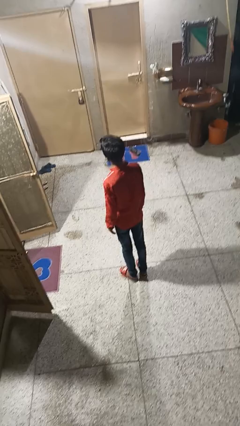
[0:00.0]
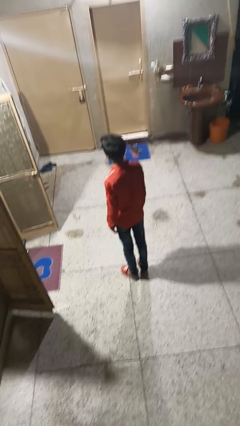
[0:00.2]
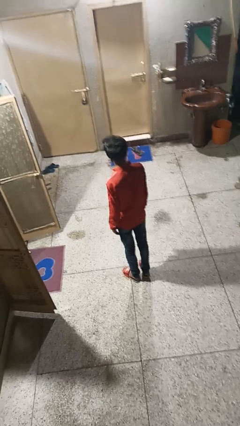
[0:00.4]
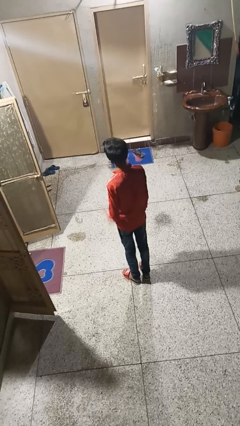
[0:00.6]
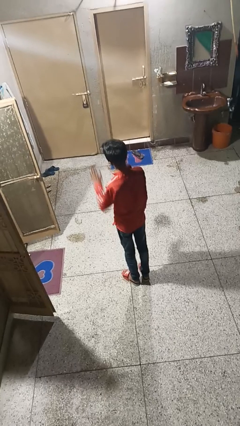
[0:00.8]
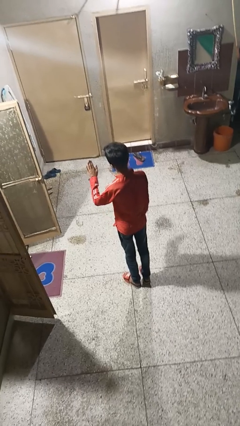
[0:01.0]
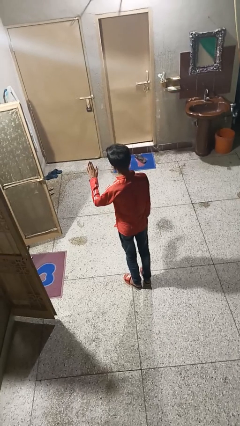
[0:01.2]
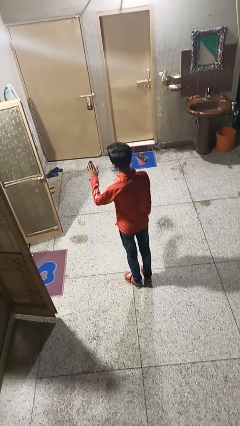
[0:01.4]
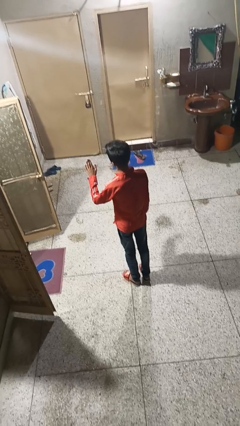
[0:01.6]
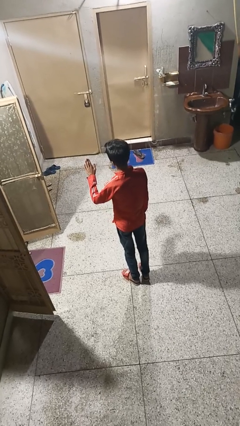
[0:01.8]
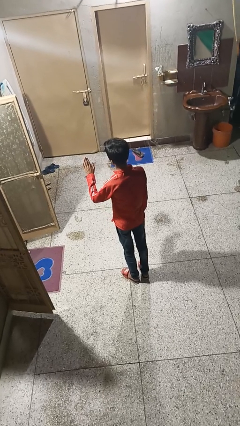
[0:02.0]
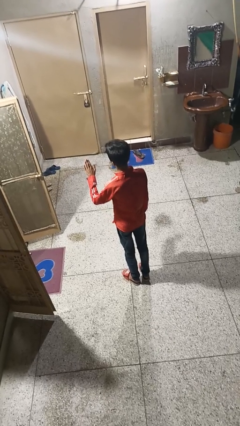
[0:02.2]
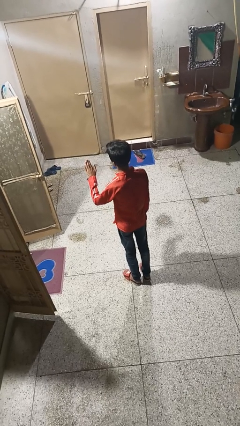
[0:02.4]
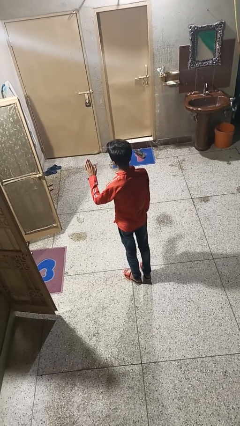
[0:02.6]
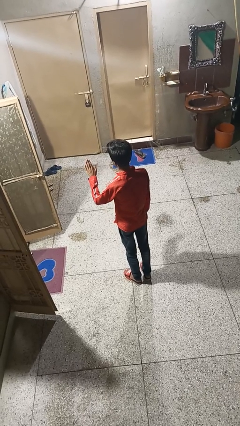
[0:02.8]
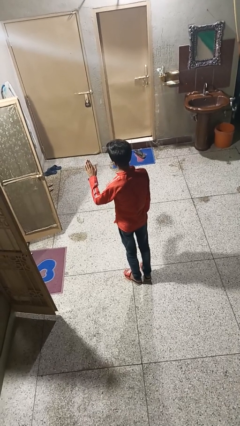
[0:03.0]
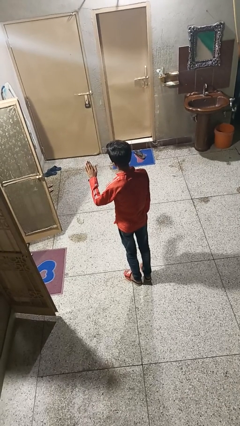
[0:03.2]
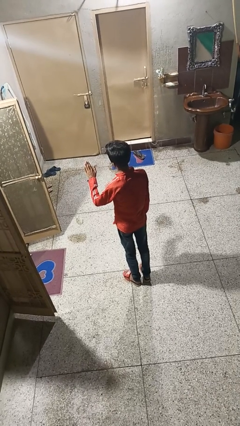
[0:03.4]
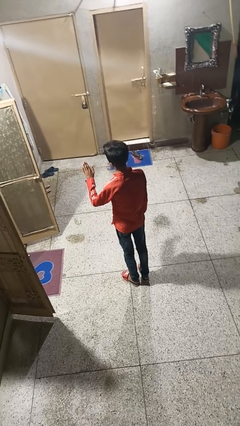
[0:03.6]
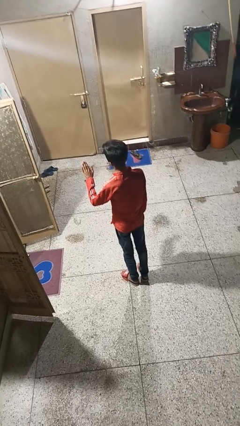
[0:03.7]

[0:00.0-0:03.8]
person gestures stop

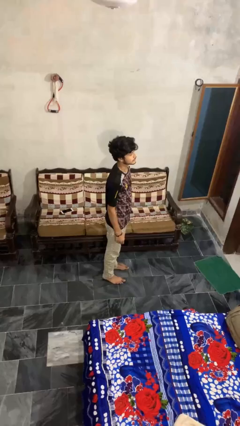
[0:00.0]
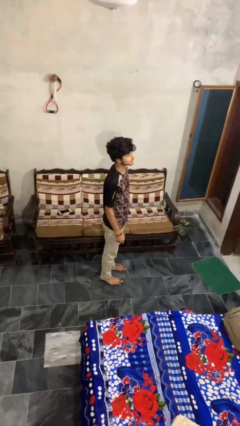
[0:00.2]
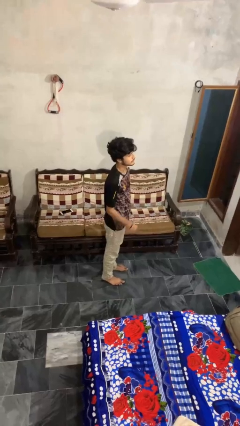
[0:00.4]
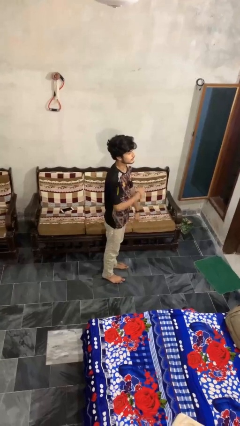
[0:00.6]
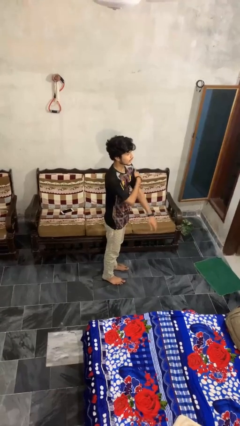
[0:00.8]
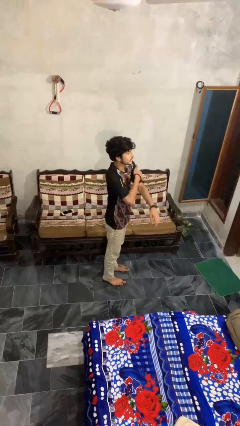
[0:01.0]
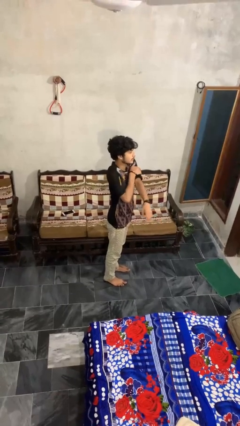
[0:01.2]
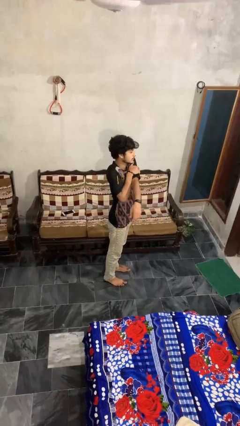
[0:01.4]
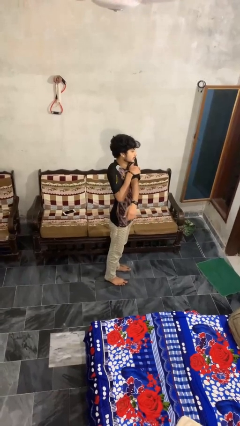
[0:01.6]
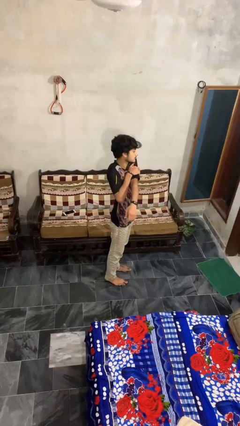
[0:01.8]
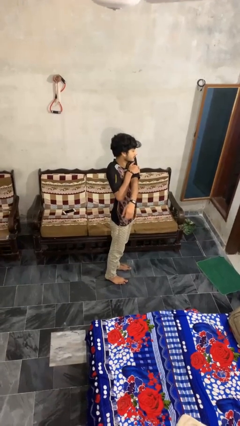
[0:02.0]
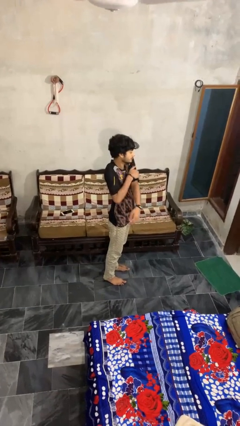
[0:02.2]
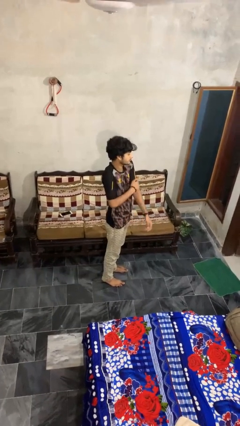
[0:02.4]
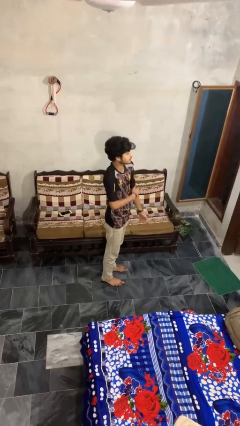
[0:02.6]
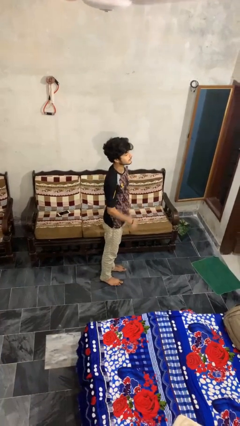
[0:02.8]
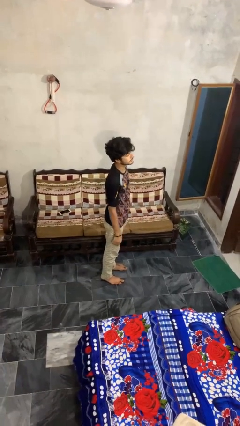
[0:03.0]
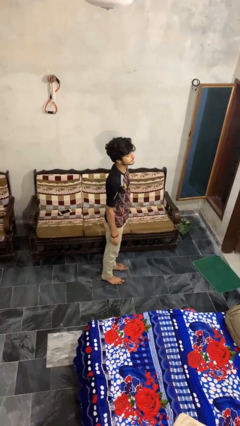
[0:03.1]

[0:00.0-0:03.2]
person stretches arms to side

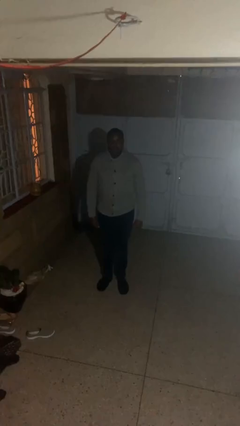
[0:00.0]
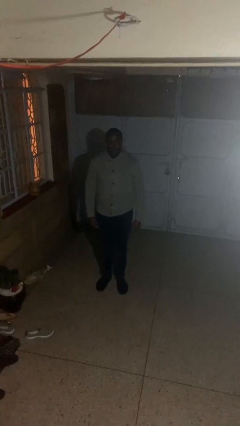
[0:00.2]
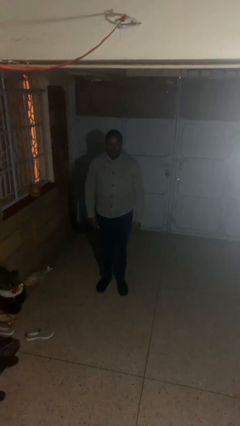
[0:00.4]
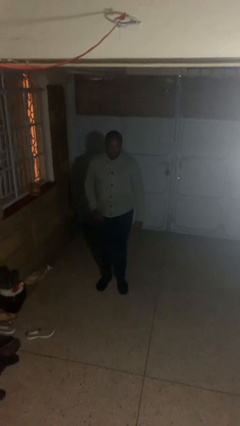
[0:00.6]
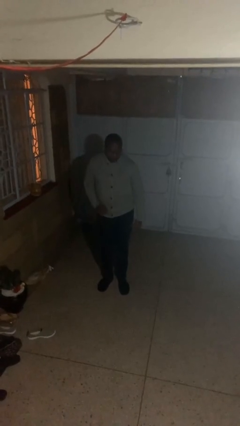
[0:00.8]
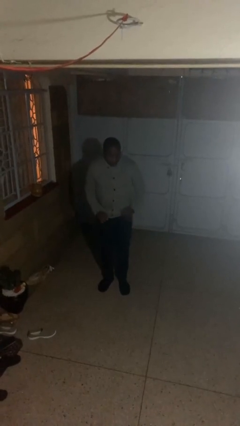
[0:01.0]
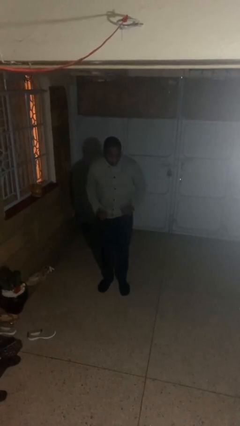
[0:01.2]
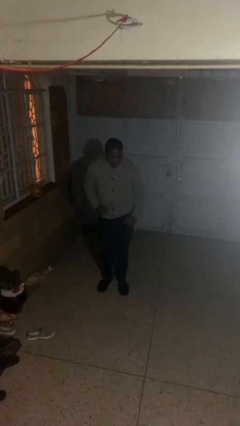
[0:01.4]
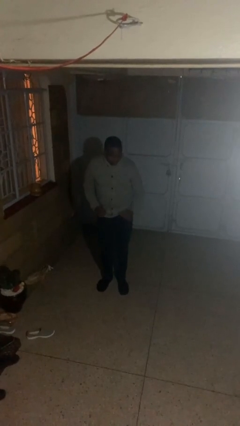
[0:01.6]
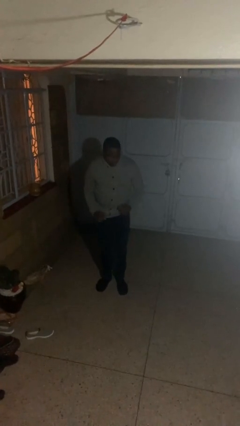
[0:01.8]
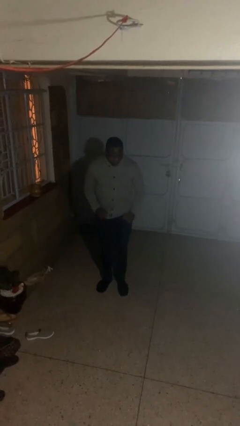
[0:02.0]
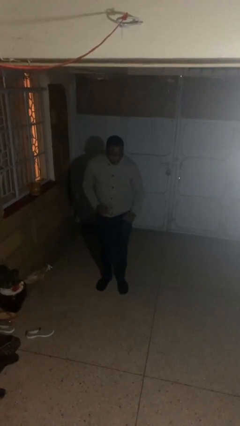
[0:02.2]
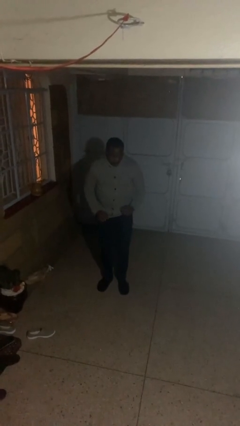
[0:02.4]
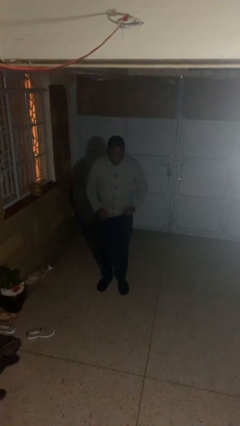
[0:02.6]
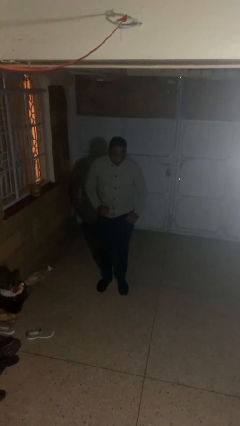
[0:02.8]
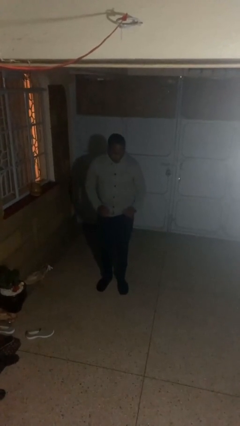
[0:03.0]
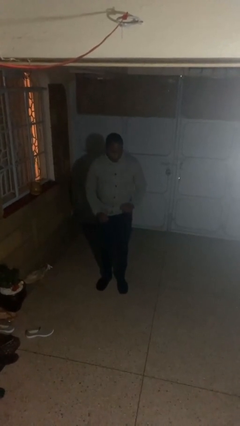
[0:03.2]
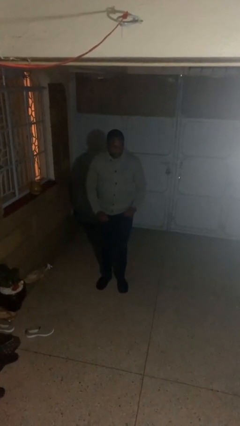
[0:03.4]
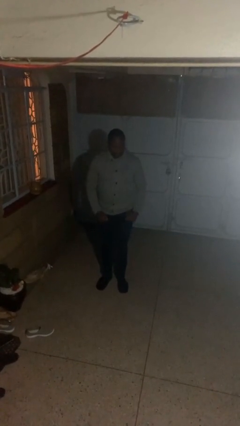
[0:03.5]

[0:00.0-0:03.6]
person dances in place

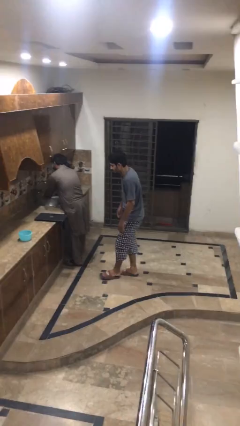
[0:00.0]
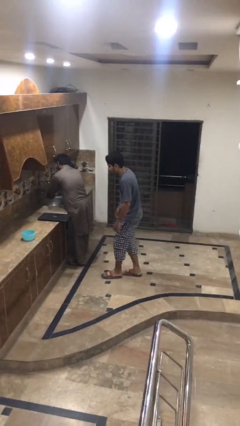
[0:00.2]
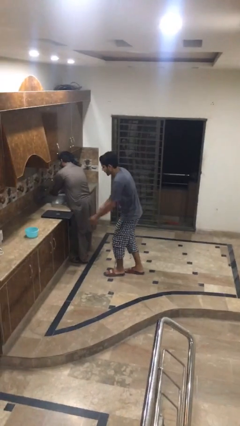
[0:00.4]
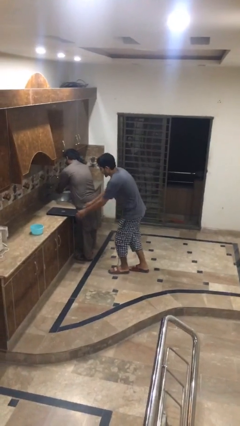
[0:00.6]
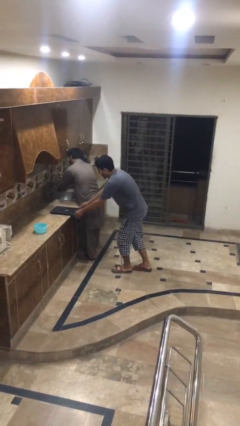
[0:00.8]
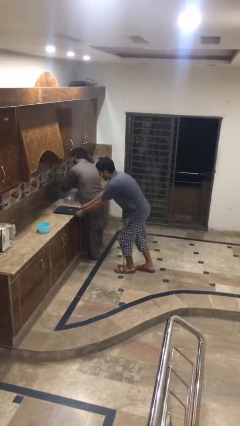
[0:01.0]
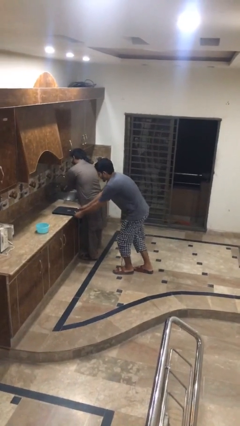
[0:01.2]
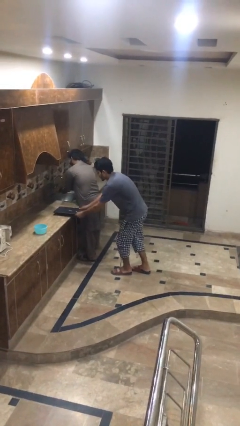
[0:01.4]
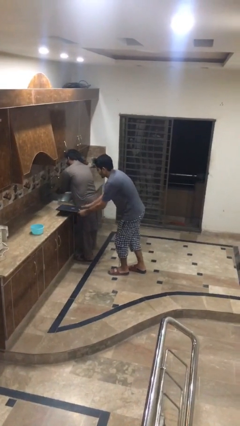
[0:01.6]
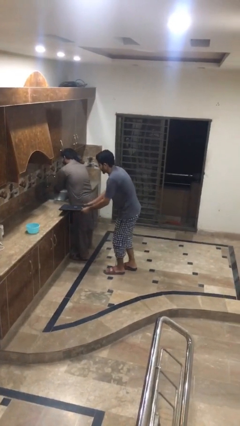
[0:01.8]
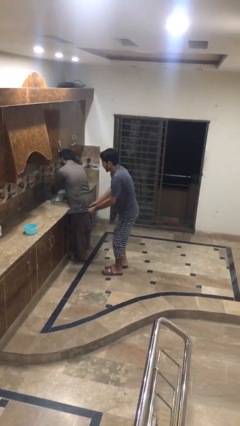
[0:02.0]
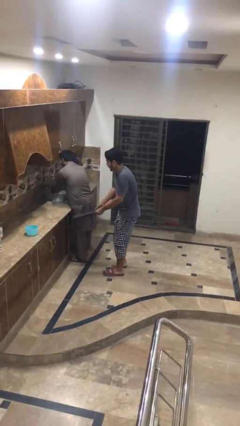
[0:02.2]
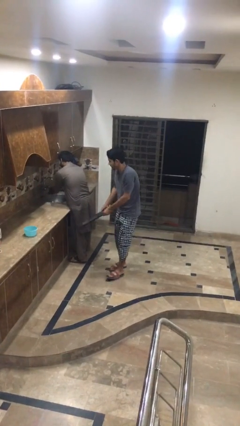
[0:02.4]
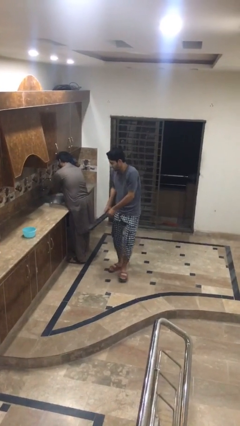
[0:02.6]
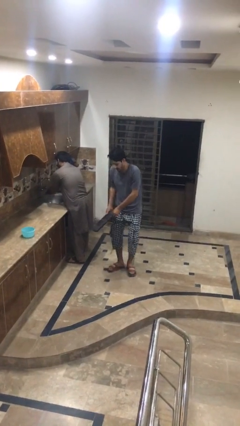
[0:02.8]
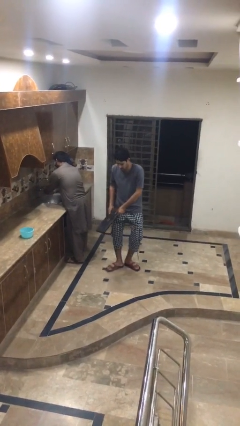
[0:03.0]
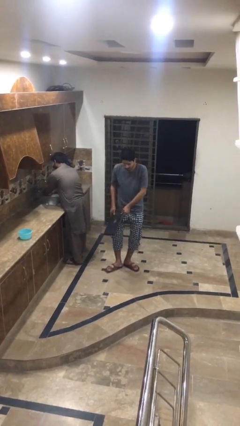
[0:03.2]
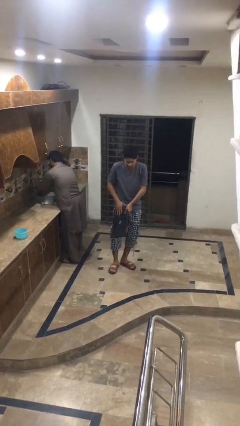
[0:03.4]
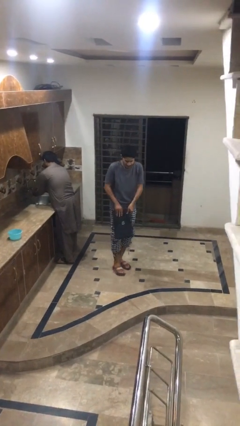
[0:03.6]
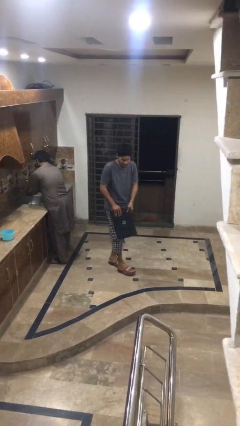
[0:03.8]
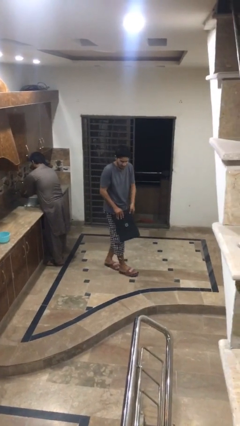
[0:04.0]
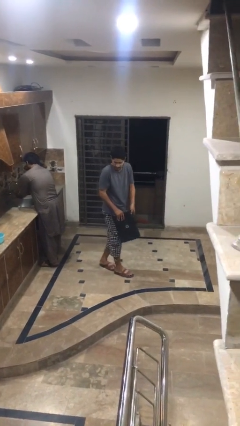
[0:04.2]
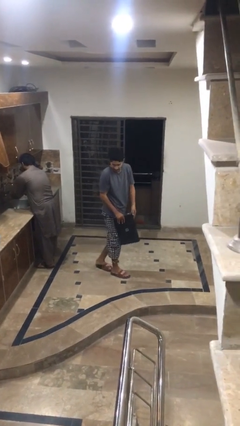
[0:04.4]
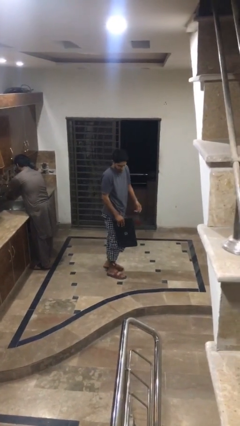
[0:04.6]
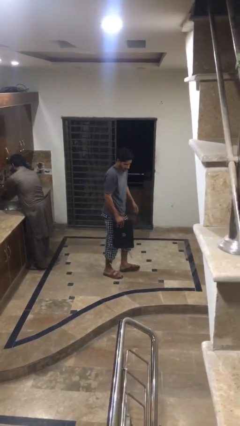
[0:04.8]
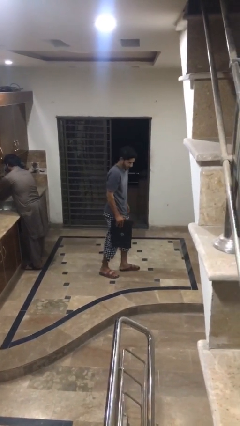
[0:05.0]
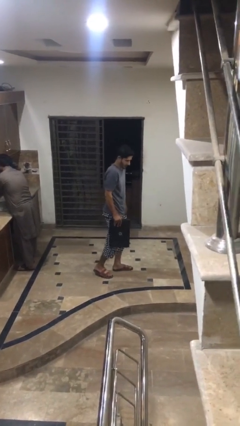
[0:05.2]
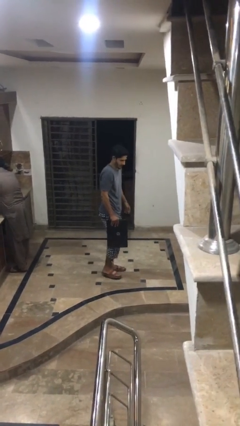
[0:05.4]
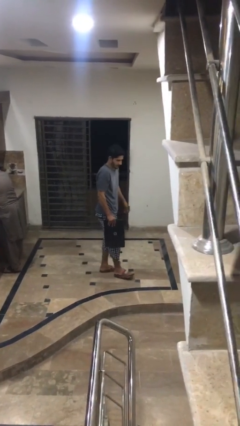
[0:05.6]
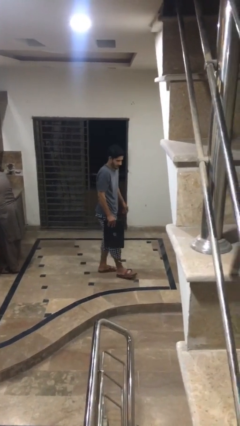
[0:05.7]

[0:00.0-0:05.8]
person steals object from person

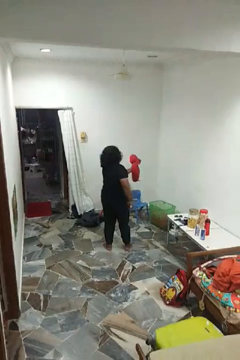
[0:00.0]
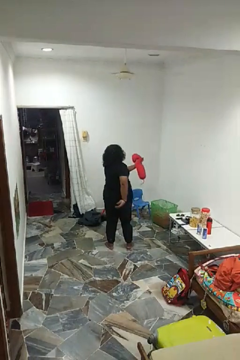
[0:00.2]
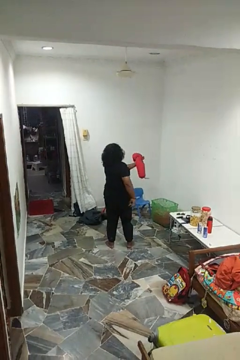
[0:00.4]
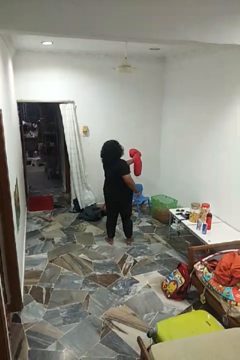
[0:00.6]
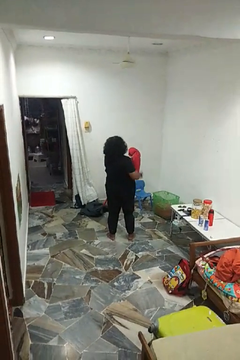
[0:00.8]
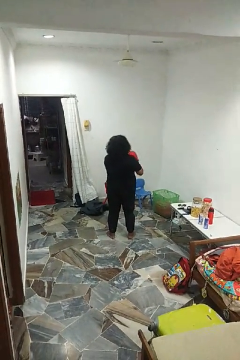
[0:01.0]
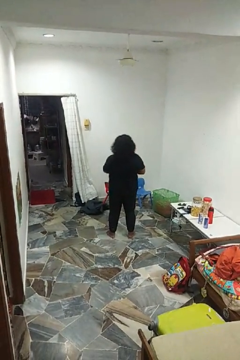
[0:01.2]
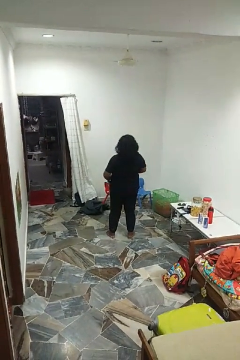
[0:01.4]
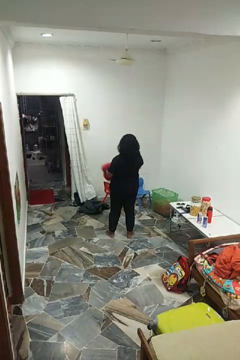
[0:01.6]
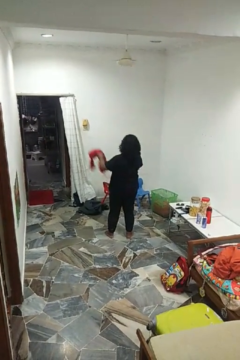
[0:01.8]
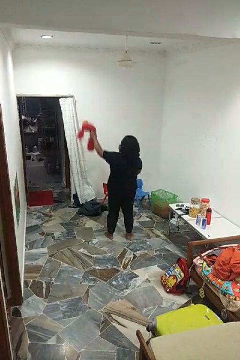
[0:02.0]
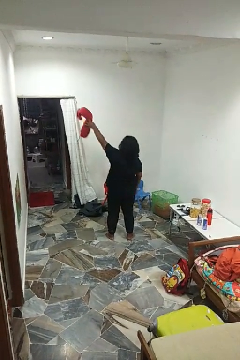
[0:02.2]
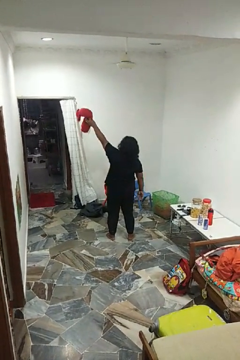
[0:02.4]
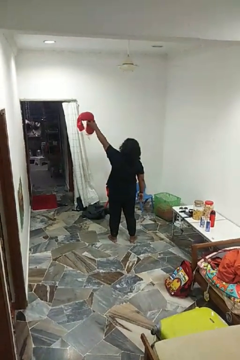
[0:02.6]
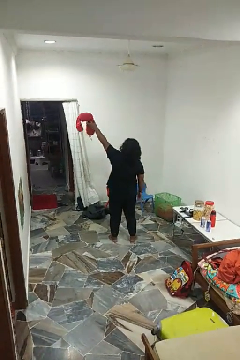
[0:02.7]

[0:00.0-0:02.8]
person catches dropped object
